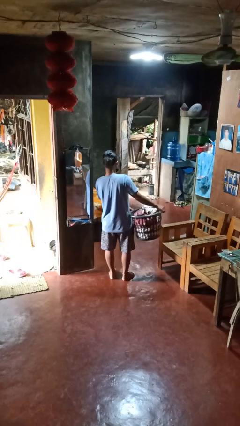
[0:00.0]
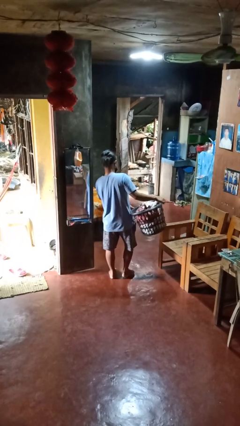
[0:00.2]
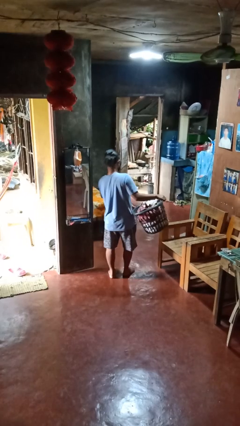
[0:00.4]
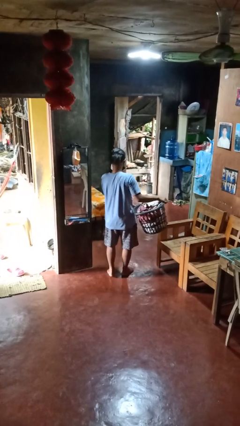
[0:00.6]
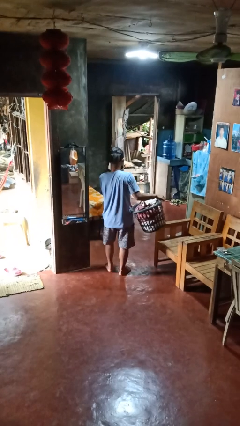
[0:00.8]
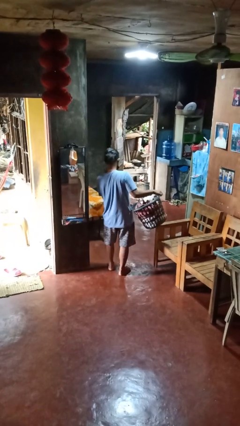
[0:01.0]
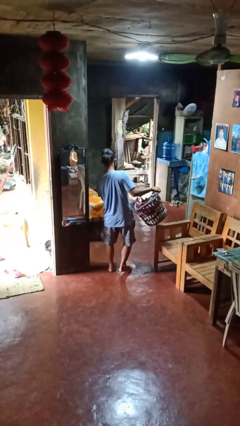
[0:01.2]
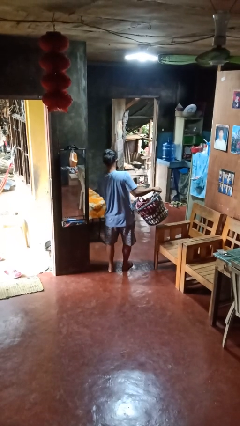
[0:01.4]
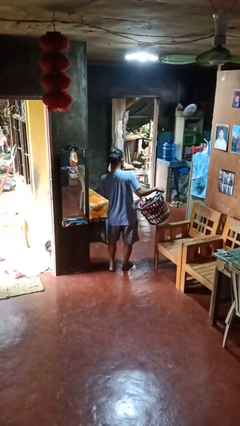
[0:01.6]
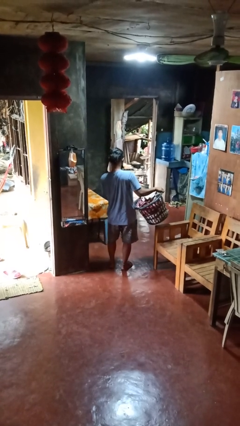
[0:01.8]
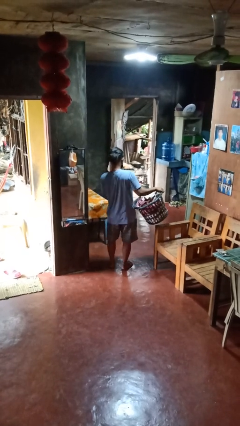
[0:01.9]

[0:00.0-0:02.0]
person carries laundry basket

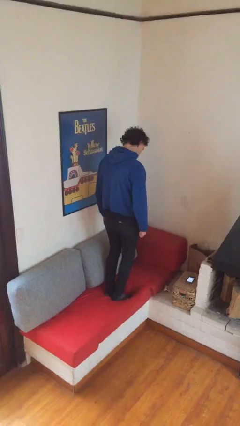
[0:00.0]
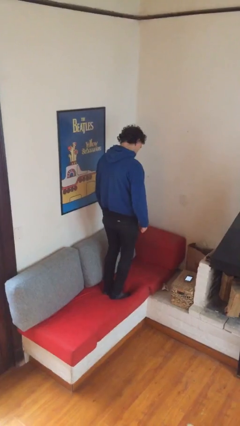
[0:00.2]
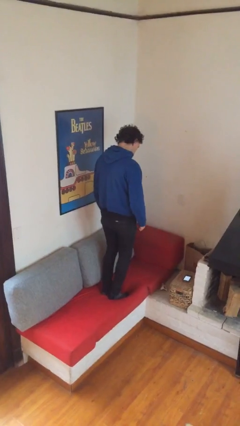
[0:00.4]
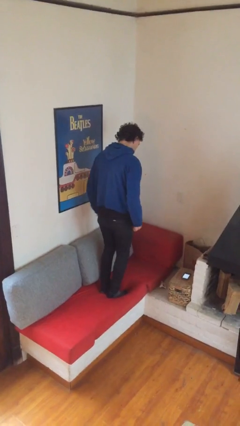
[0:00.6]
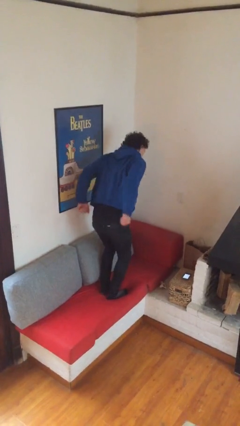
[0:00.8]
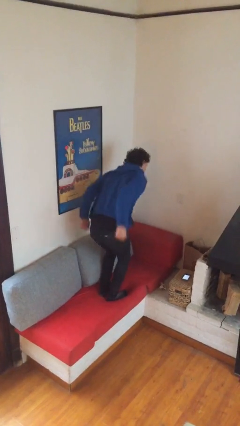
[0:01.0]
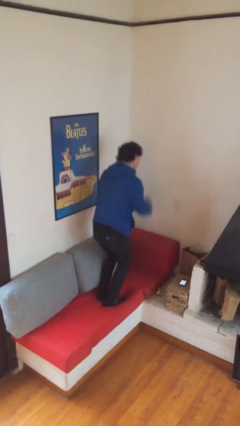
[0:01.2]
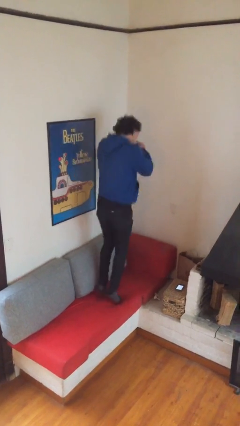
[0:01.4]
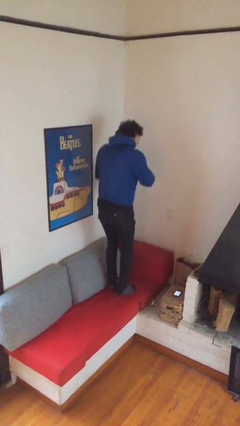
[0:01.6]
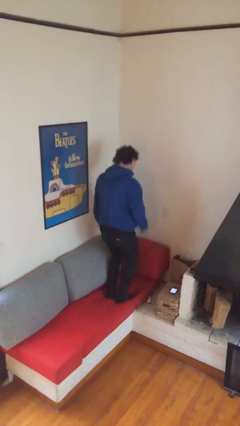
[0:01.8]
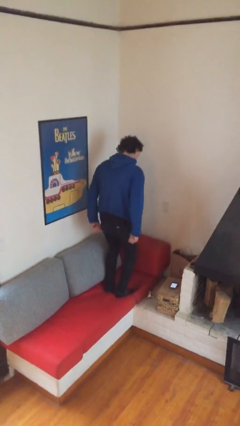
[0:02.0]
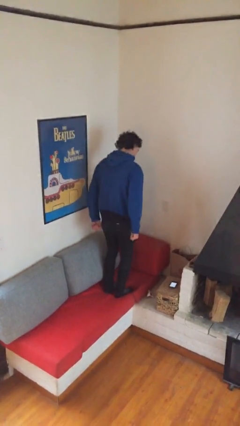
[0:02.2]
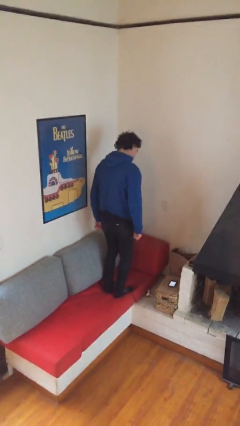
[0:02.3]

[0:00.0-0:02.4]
person jumps on couch

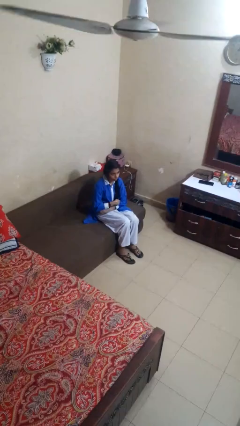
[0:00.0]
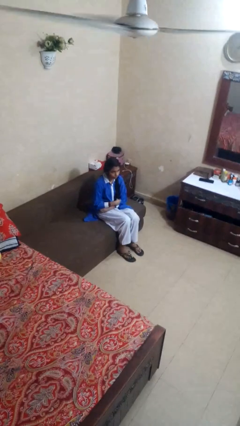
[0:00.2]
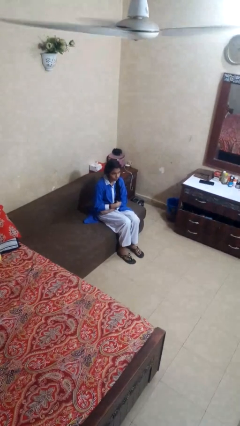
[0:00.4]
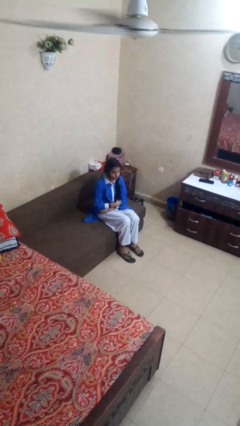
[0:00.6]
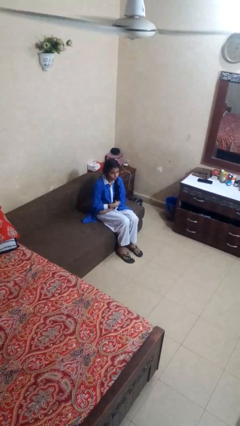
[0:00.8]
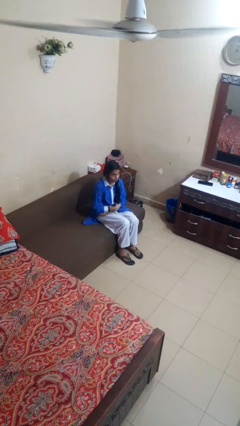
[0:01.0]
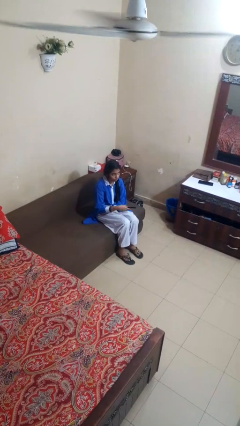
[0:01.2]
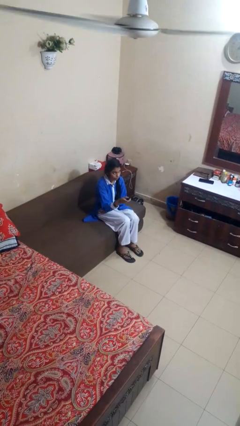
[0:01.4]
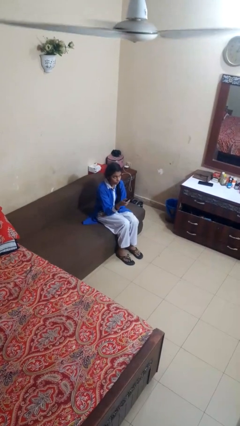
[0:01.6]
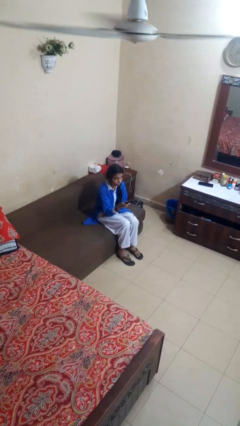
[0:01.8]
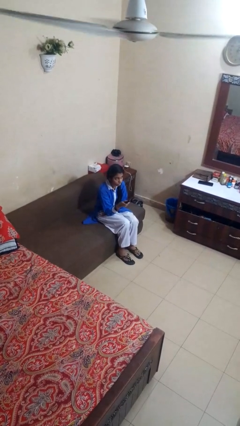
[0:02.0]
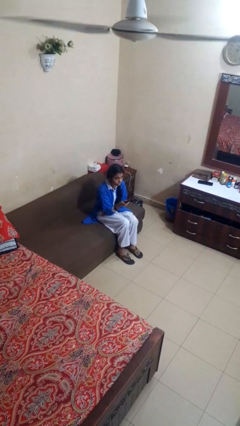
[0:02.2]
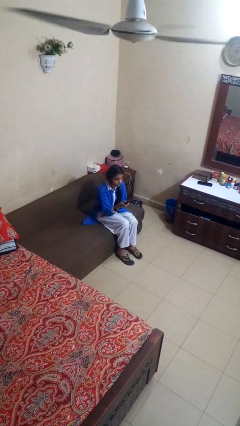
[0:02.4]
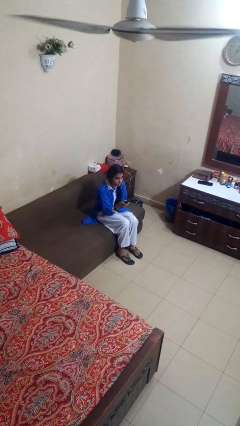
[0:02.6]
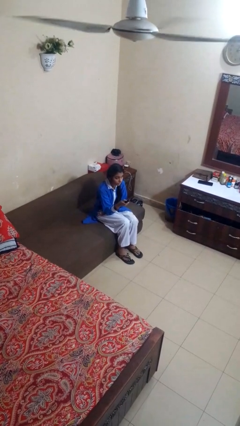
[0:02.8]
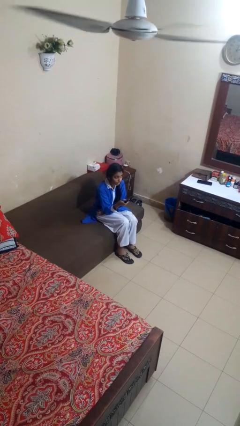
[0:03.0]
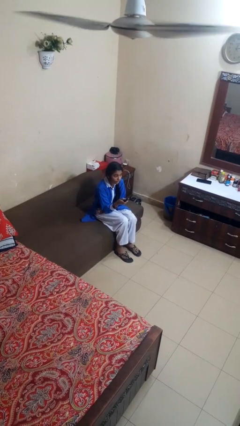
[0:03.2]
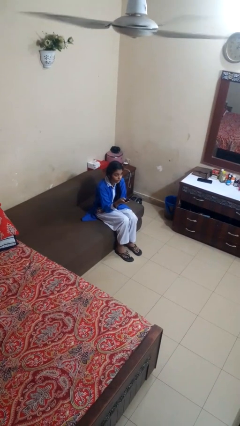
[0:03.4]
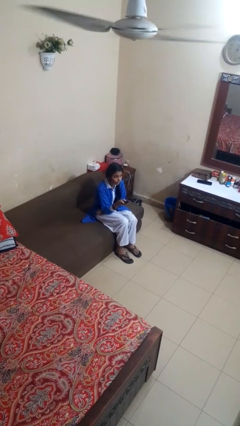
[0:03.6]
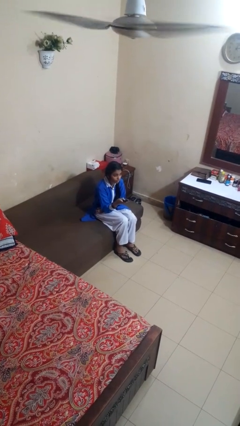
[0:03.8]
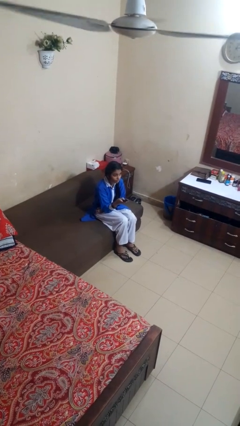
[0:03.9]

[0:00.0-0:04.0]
person uses television remote

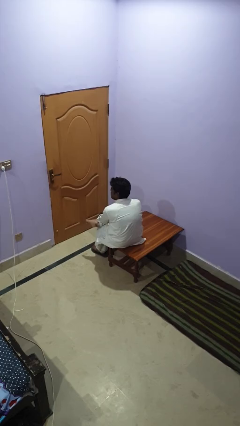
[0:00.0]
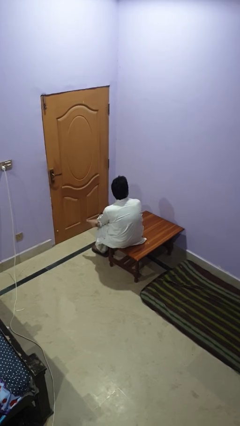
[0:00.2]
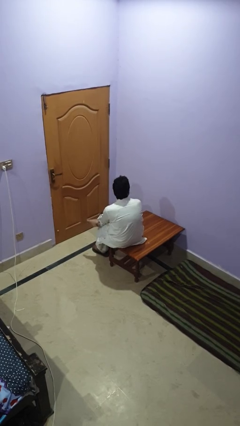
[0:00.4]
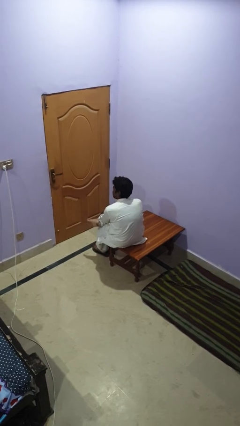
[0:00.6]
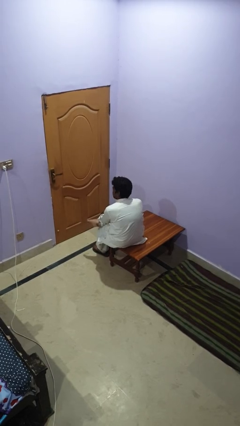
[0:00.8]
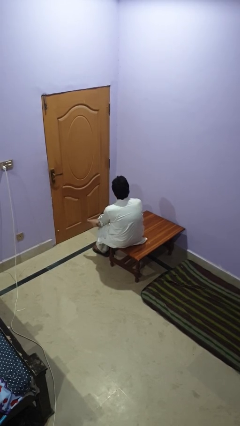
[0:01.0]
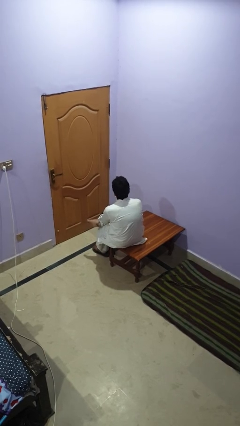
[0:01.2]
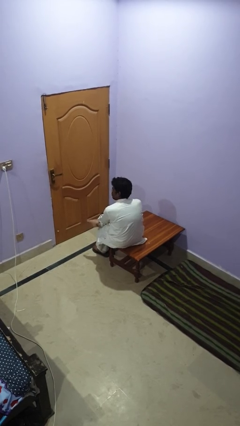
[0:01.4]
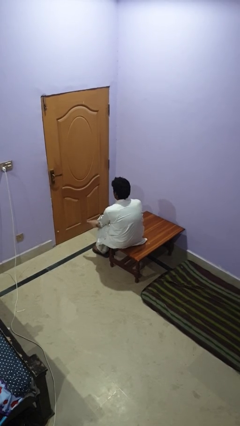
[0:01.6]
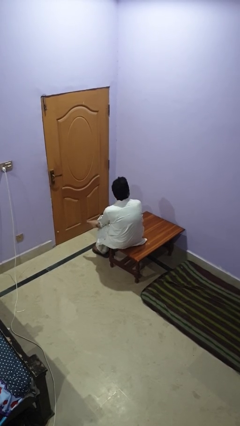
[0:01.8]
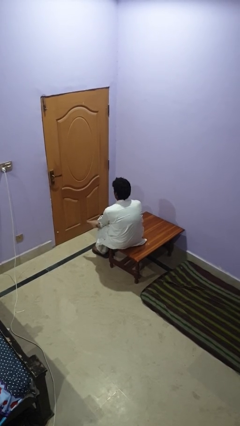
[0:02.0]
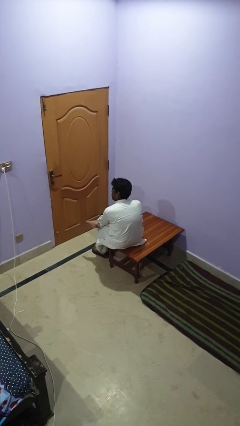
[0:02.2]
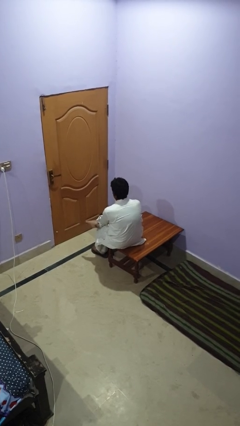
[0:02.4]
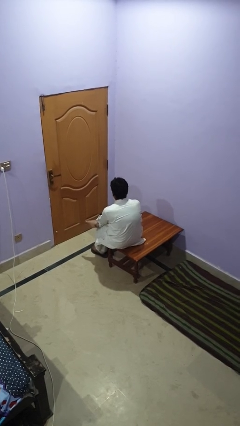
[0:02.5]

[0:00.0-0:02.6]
person shakes head

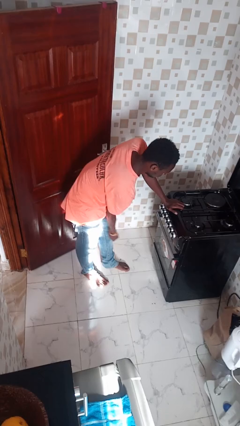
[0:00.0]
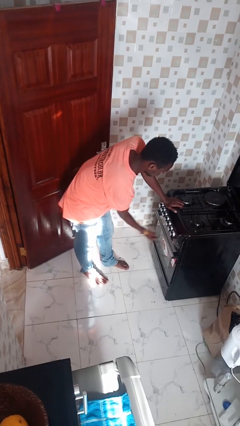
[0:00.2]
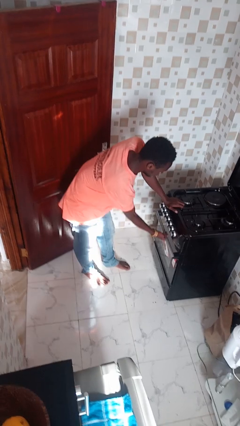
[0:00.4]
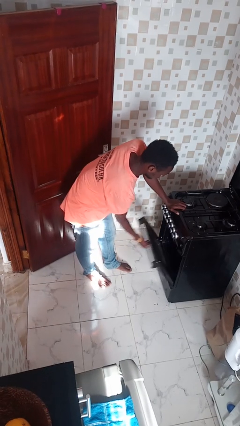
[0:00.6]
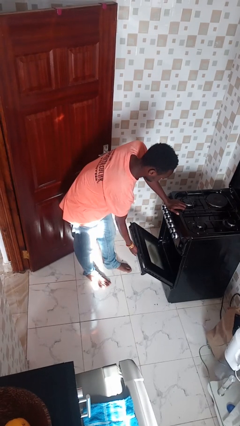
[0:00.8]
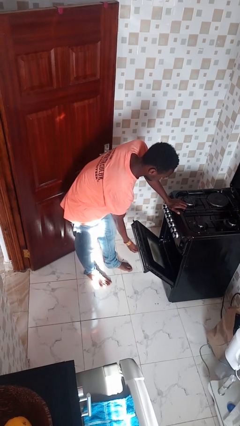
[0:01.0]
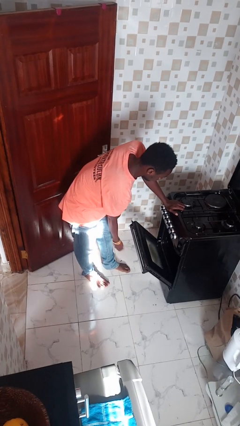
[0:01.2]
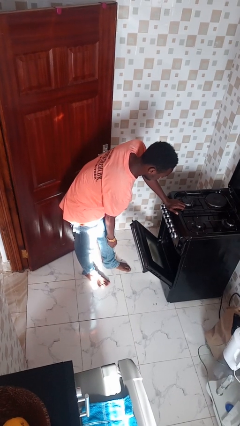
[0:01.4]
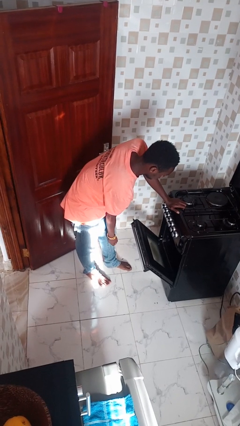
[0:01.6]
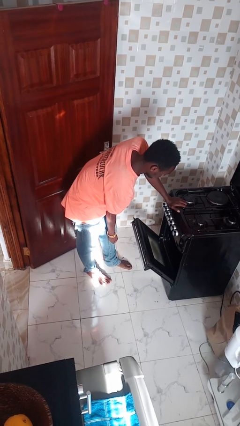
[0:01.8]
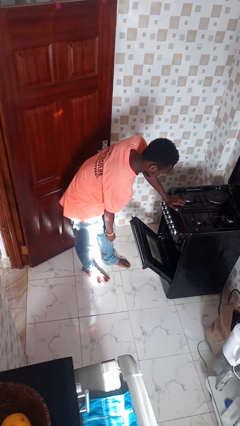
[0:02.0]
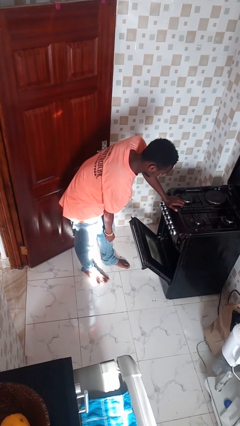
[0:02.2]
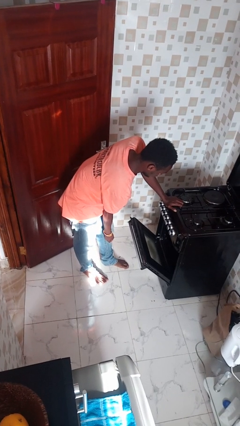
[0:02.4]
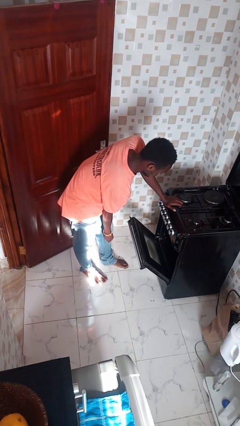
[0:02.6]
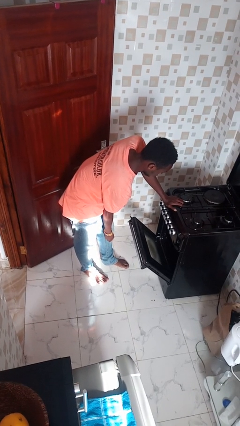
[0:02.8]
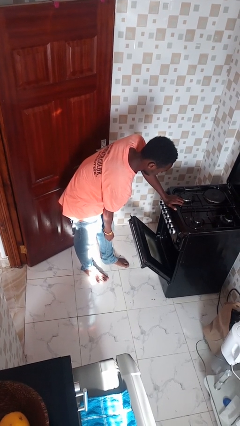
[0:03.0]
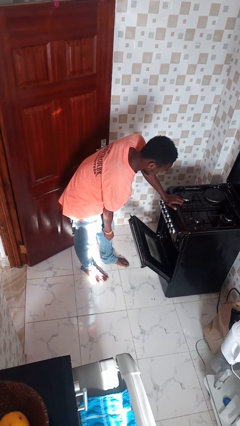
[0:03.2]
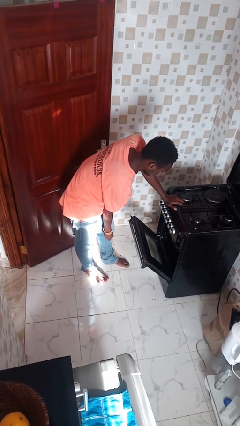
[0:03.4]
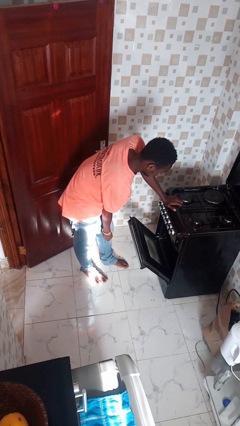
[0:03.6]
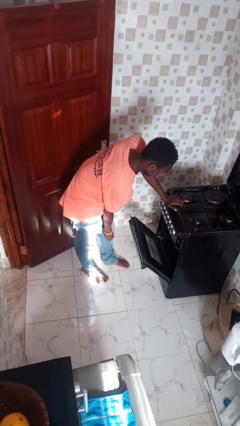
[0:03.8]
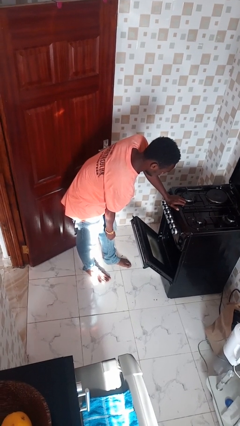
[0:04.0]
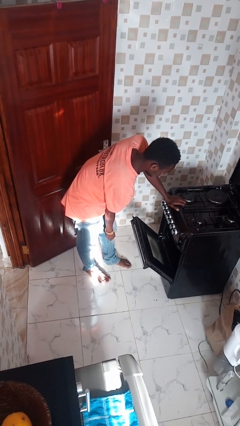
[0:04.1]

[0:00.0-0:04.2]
person opens oven door

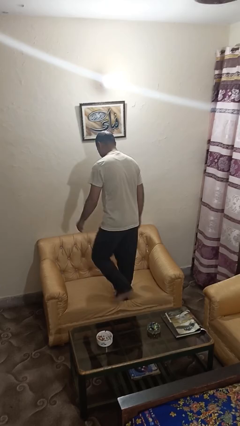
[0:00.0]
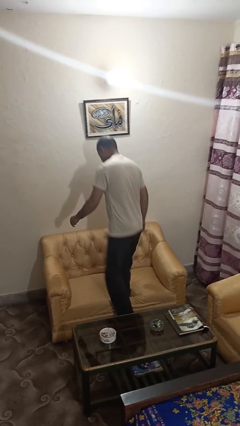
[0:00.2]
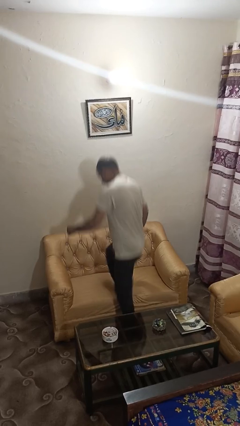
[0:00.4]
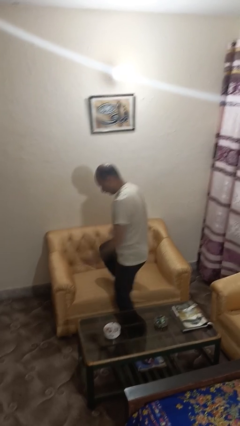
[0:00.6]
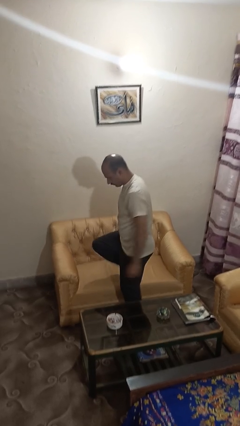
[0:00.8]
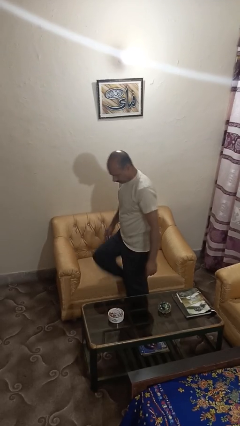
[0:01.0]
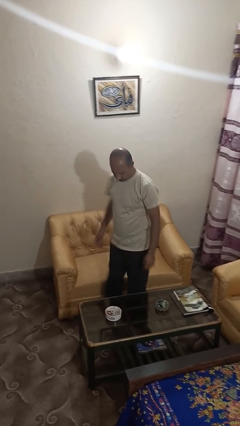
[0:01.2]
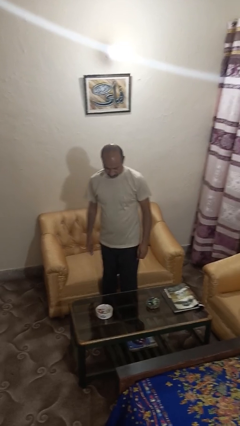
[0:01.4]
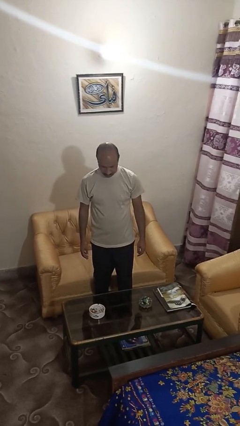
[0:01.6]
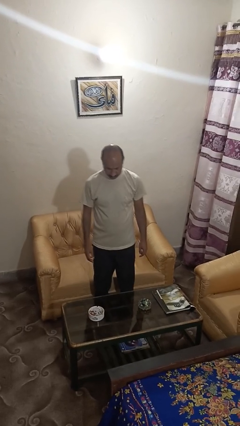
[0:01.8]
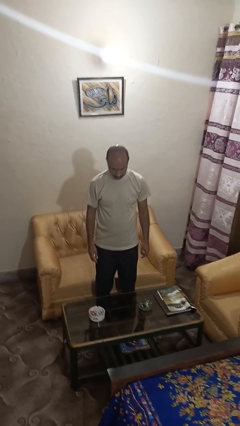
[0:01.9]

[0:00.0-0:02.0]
person climbs off couch

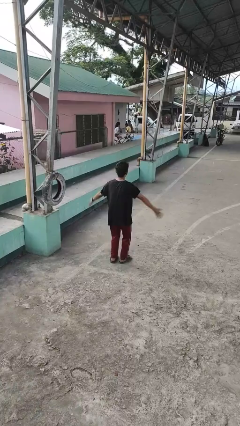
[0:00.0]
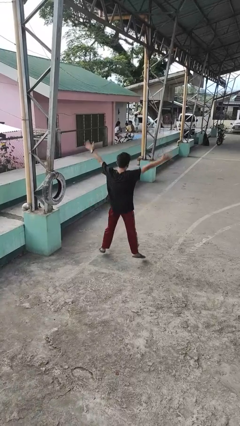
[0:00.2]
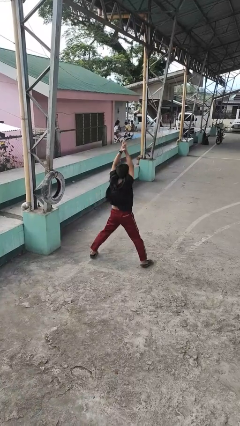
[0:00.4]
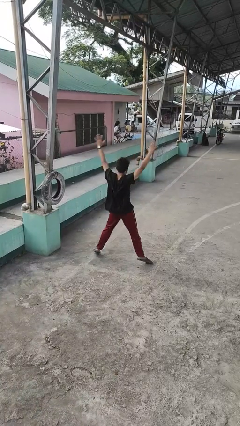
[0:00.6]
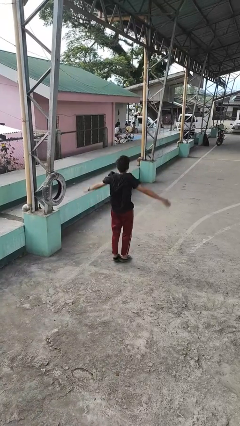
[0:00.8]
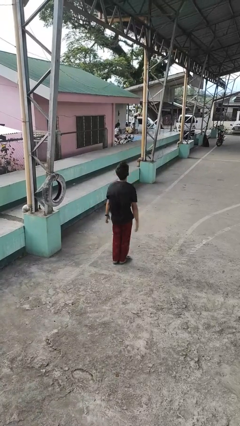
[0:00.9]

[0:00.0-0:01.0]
person exercises with jumping jacks
